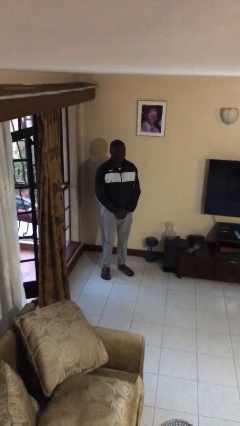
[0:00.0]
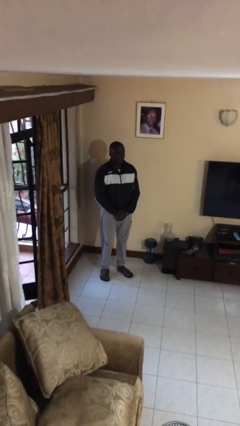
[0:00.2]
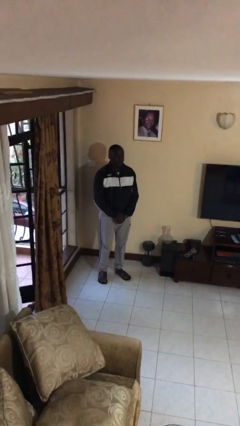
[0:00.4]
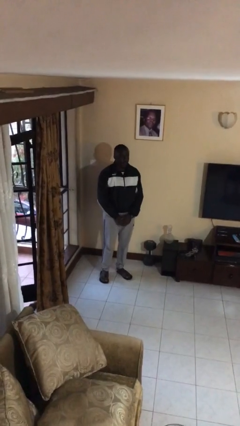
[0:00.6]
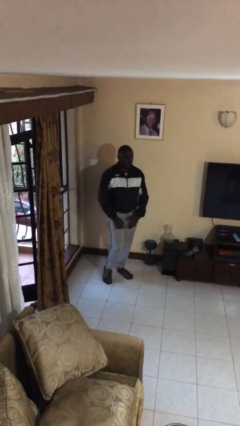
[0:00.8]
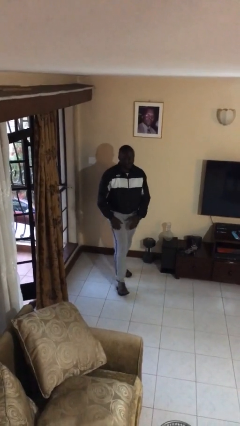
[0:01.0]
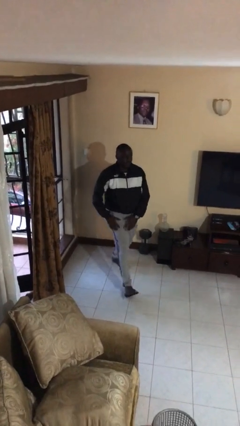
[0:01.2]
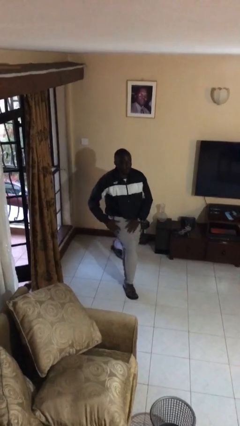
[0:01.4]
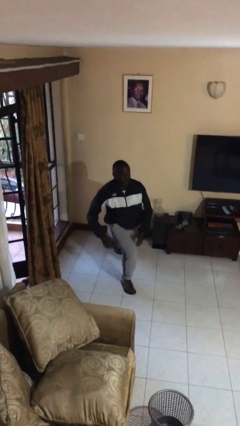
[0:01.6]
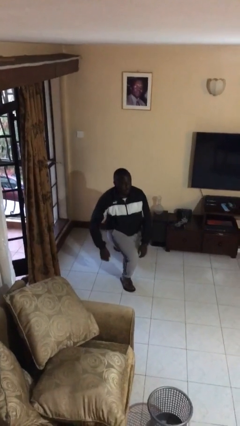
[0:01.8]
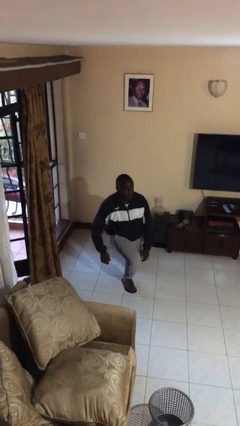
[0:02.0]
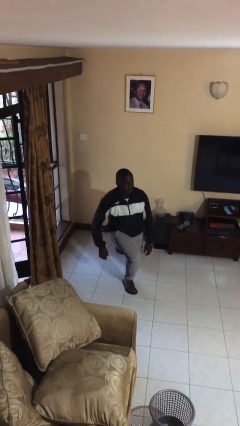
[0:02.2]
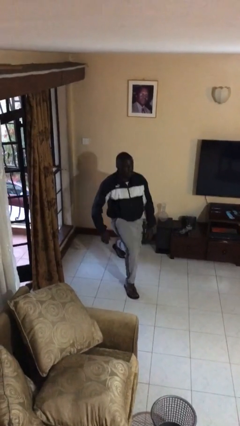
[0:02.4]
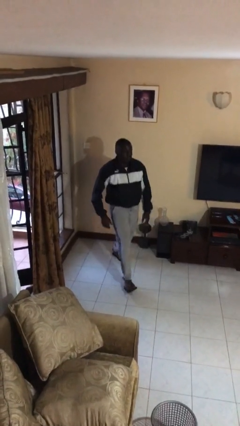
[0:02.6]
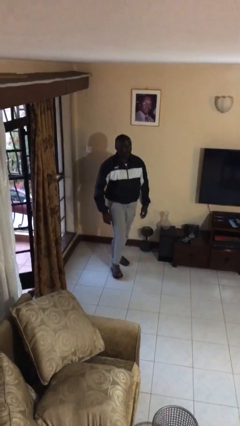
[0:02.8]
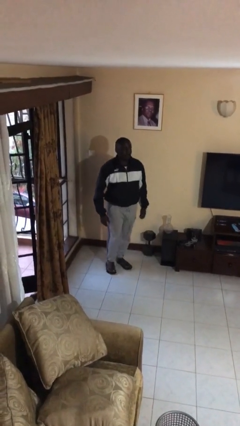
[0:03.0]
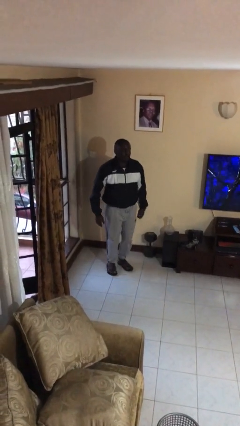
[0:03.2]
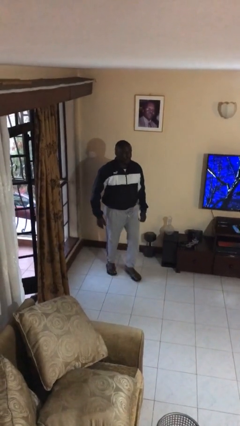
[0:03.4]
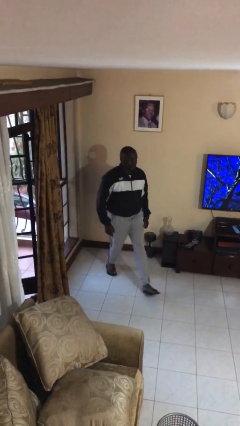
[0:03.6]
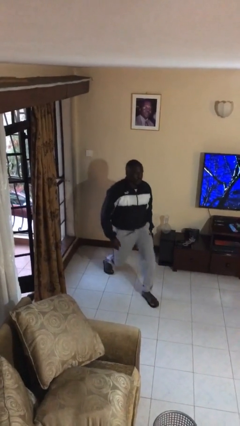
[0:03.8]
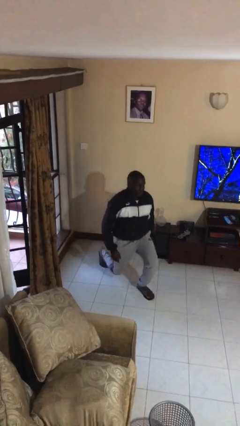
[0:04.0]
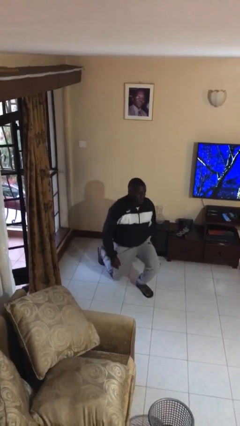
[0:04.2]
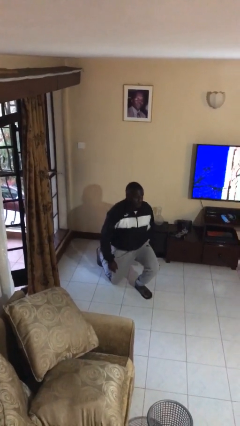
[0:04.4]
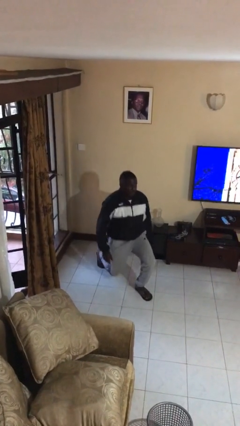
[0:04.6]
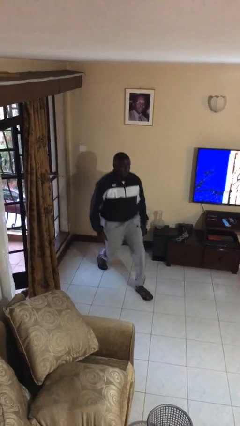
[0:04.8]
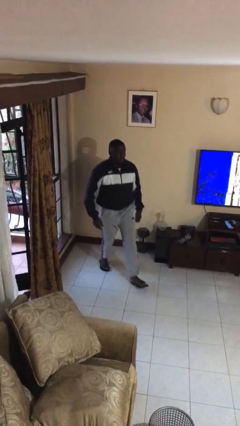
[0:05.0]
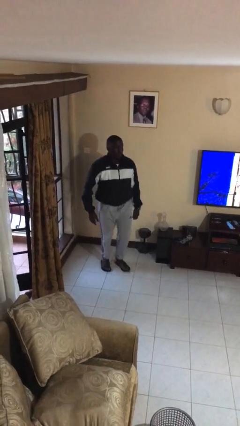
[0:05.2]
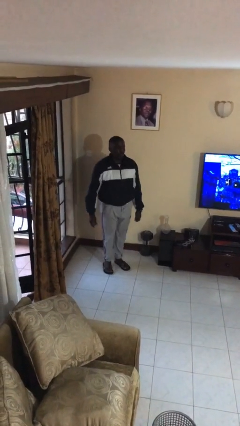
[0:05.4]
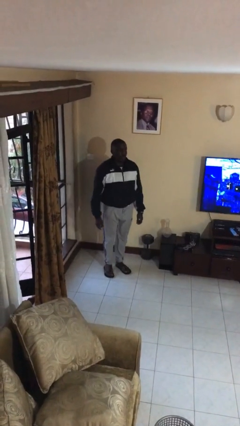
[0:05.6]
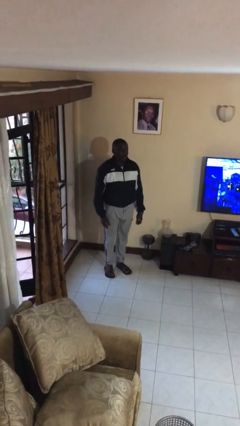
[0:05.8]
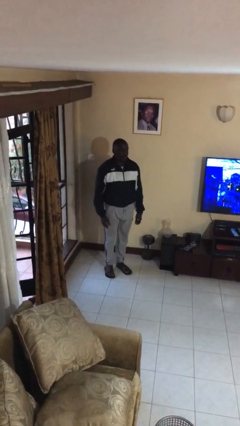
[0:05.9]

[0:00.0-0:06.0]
person exercises with lunges

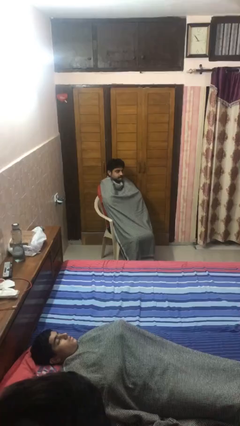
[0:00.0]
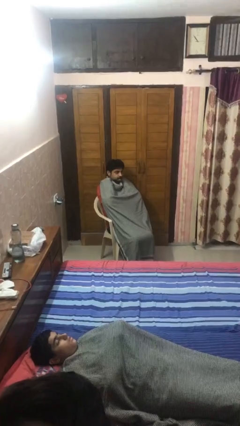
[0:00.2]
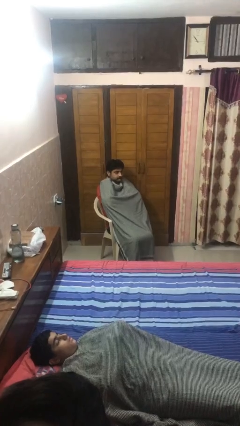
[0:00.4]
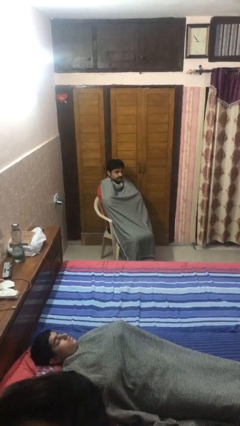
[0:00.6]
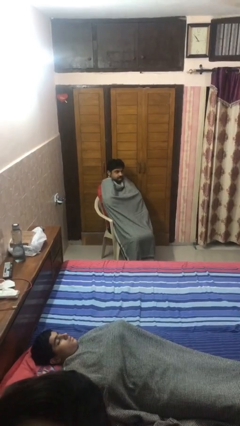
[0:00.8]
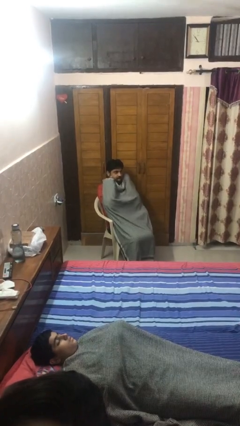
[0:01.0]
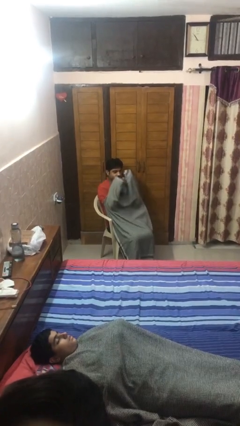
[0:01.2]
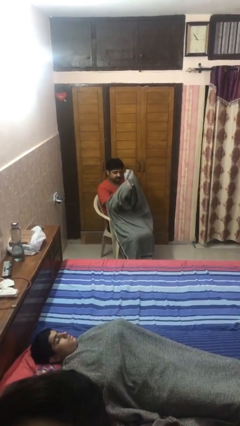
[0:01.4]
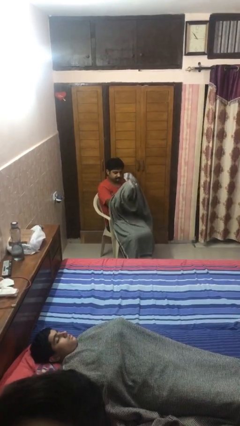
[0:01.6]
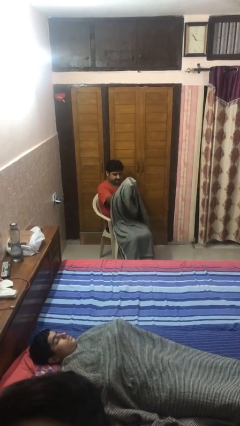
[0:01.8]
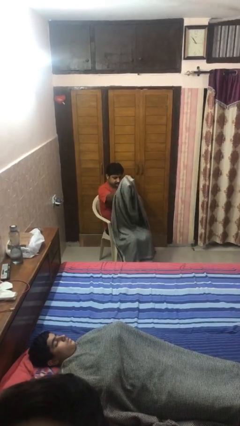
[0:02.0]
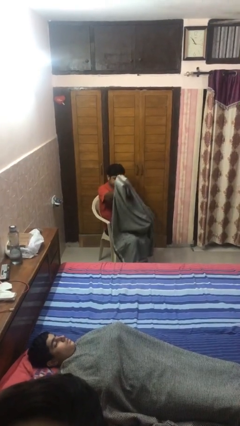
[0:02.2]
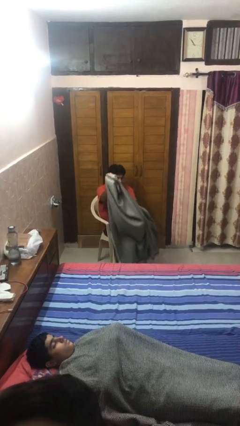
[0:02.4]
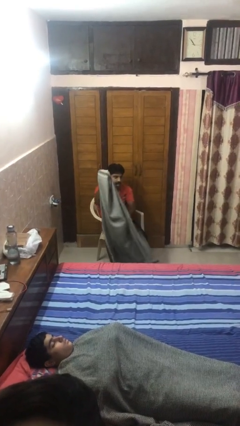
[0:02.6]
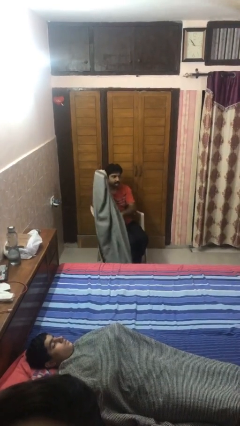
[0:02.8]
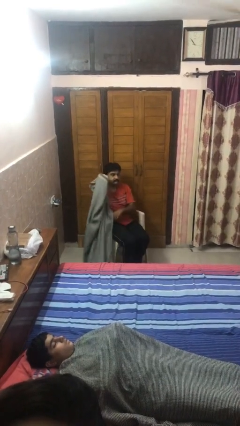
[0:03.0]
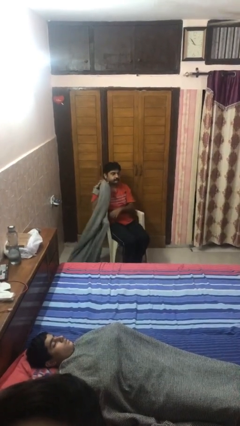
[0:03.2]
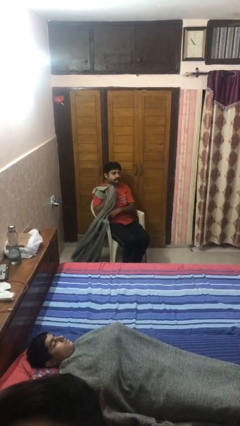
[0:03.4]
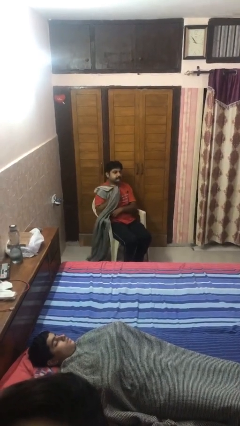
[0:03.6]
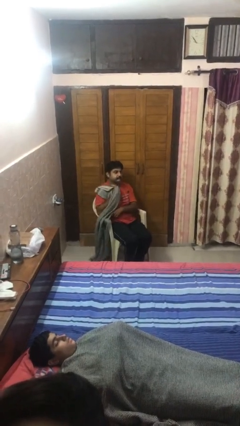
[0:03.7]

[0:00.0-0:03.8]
person uncovers with blanket

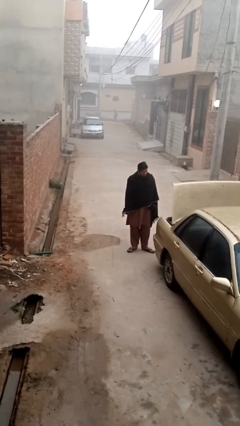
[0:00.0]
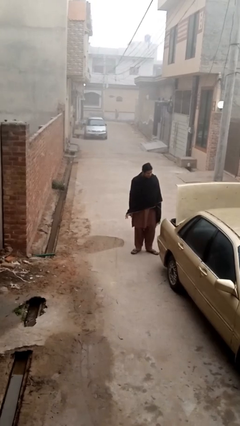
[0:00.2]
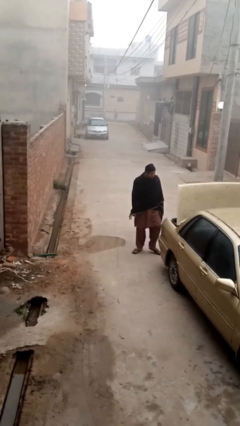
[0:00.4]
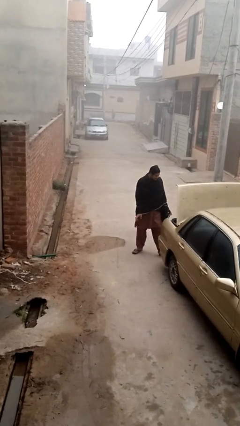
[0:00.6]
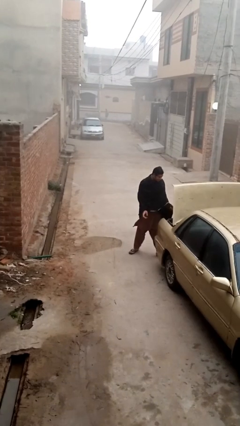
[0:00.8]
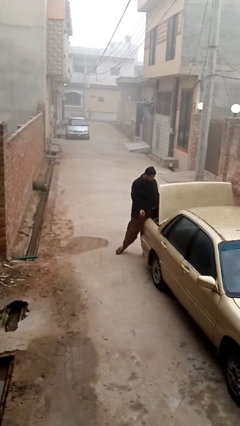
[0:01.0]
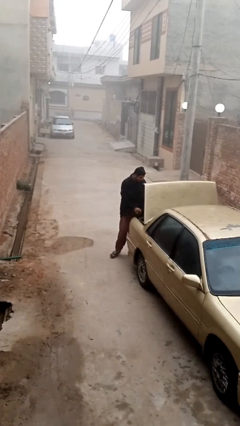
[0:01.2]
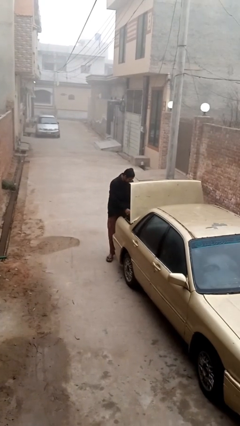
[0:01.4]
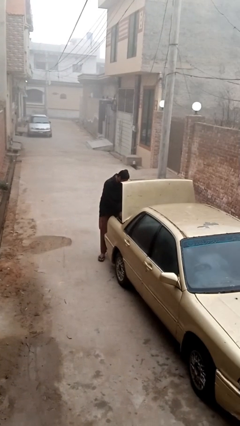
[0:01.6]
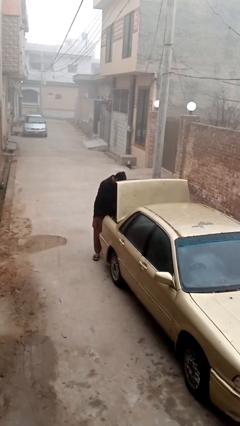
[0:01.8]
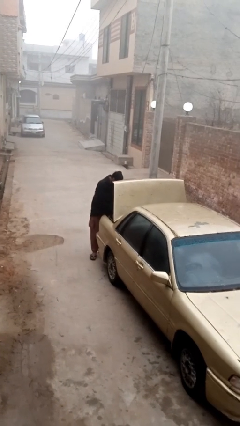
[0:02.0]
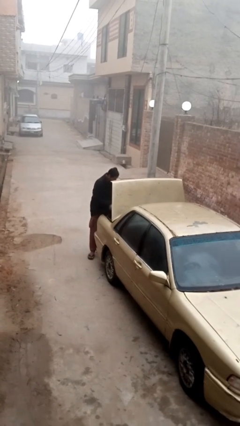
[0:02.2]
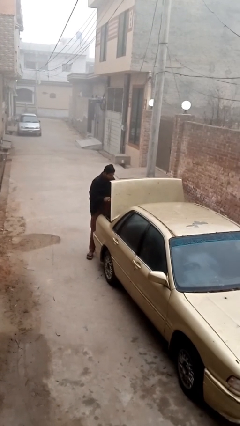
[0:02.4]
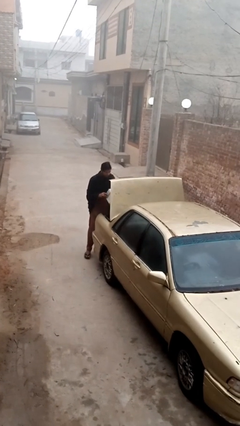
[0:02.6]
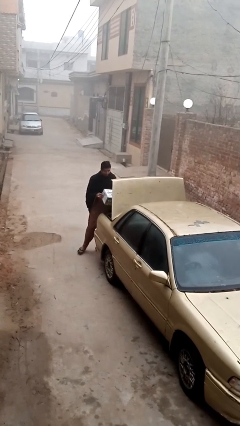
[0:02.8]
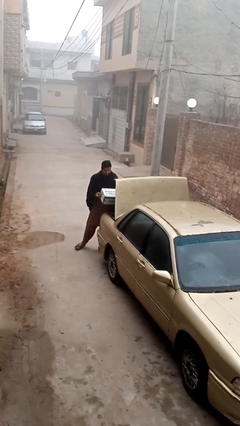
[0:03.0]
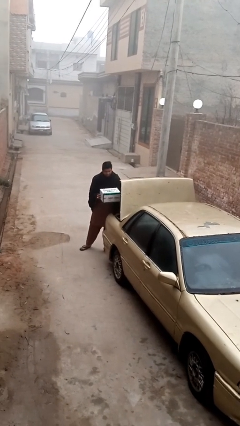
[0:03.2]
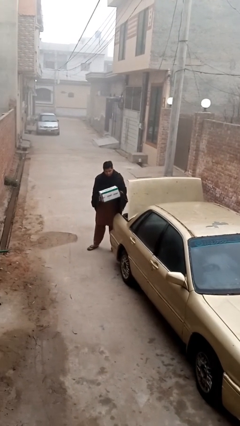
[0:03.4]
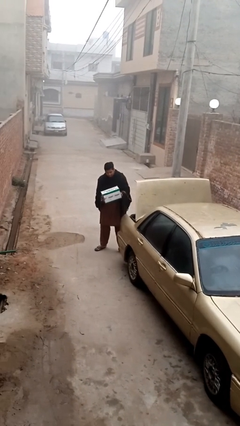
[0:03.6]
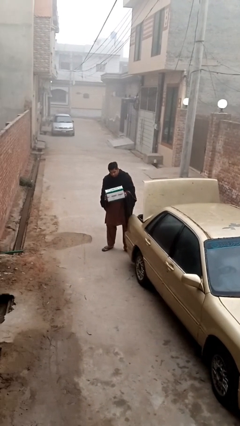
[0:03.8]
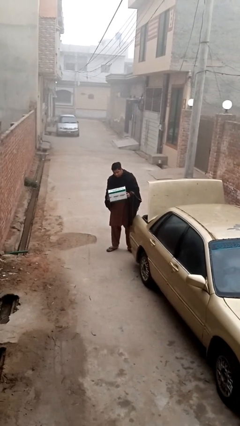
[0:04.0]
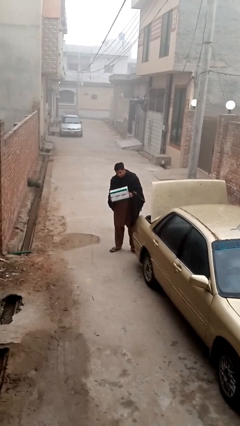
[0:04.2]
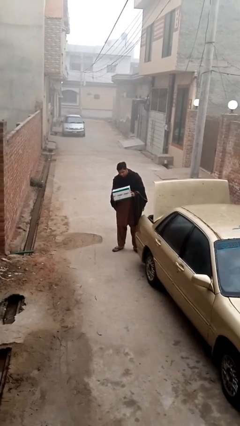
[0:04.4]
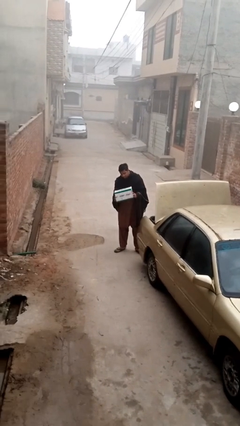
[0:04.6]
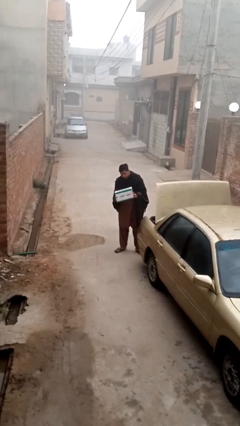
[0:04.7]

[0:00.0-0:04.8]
person unloads car

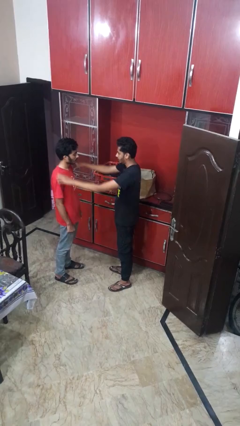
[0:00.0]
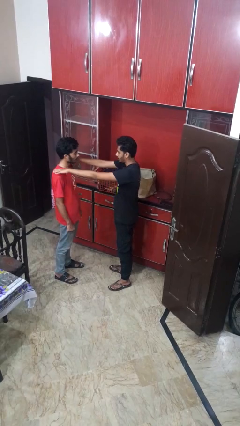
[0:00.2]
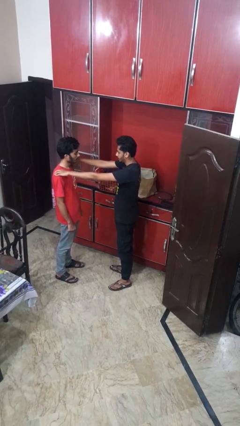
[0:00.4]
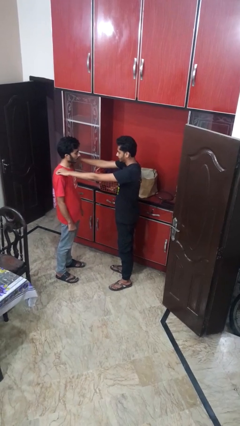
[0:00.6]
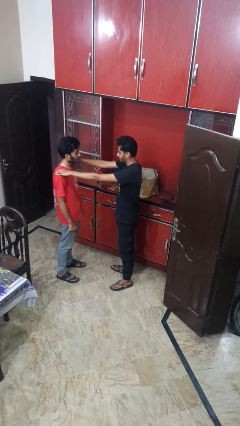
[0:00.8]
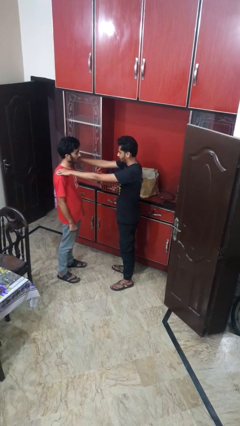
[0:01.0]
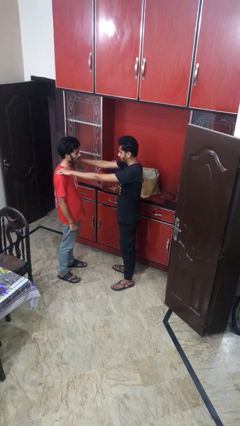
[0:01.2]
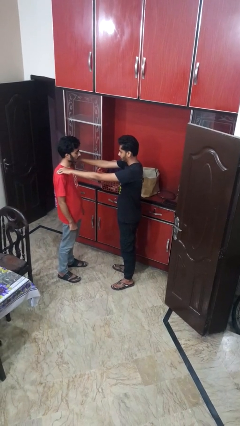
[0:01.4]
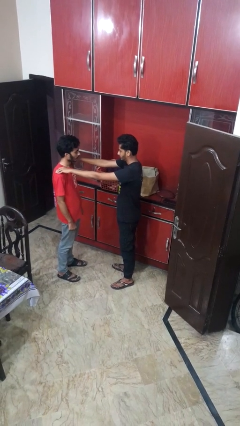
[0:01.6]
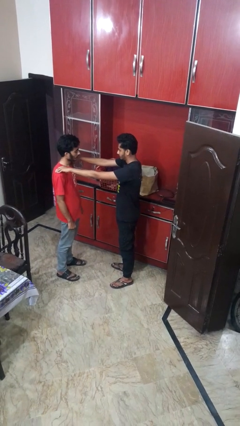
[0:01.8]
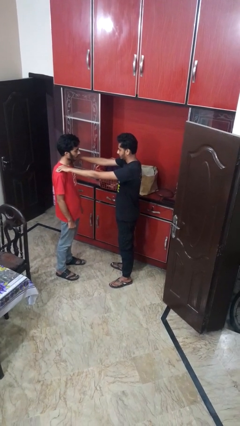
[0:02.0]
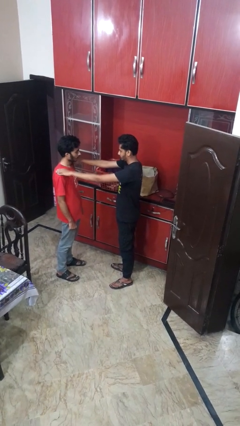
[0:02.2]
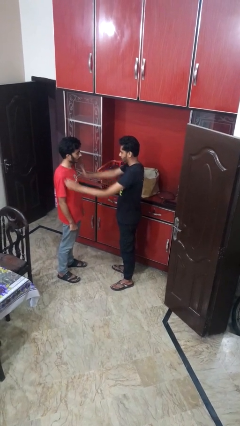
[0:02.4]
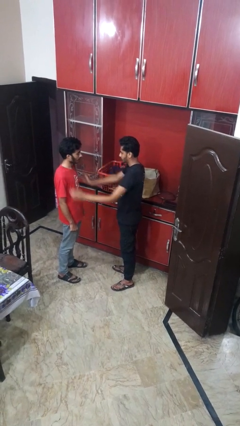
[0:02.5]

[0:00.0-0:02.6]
person pounds shoulders of person
